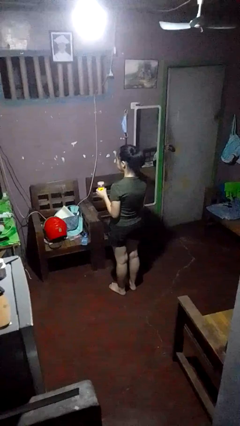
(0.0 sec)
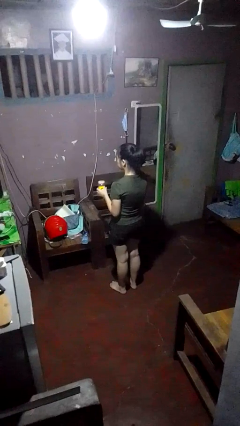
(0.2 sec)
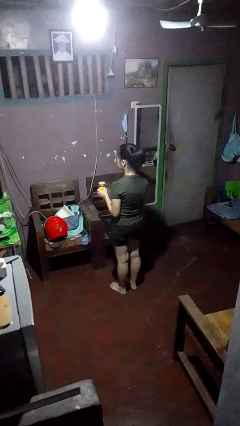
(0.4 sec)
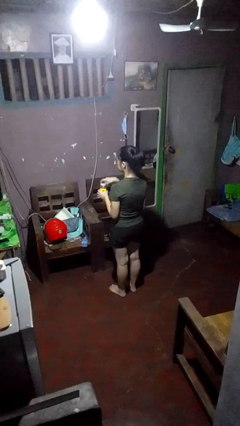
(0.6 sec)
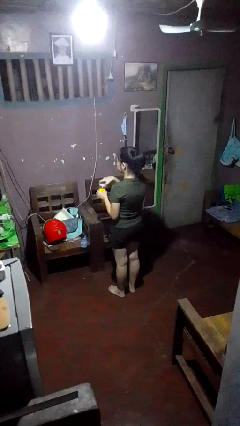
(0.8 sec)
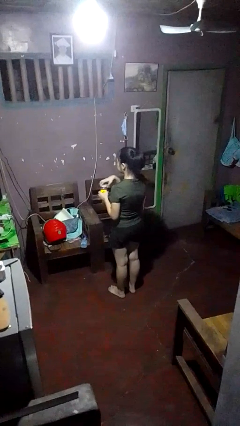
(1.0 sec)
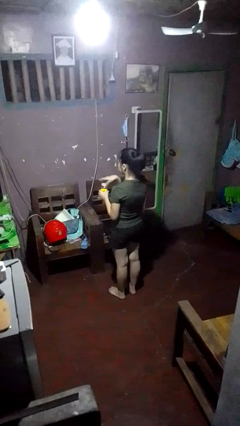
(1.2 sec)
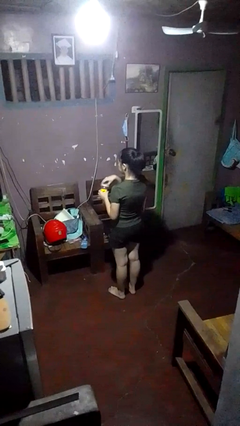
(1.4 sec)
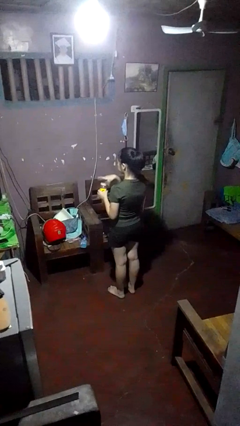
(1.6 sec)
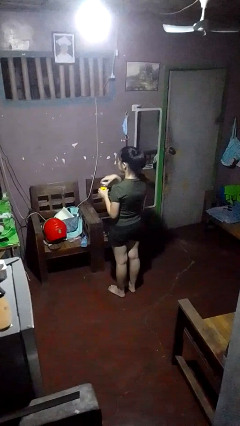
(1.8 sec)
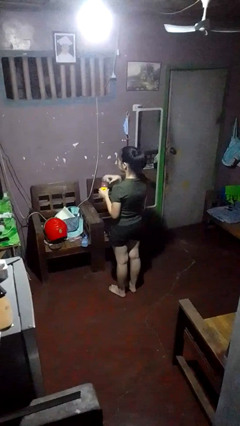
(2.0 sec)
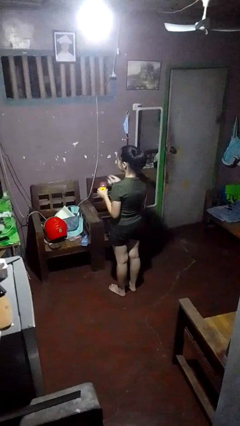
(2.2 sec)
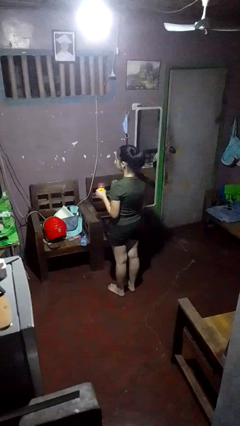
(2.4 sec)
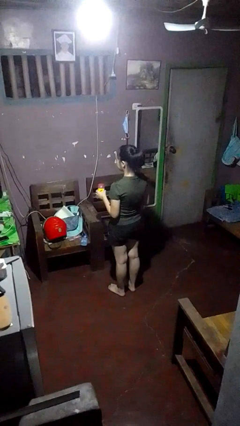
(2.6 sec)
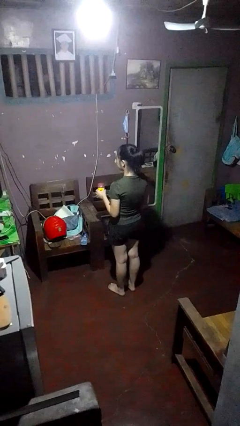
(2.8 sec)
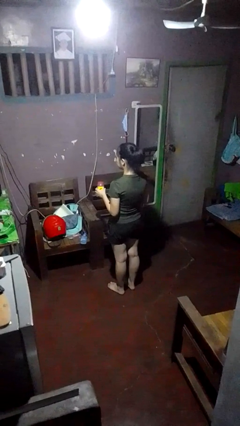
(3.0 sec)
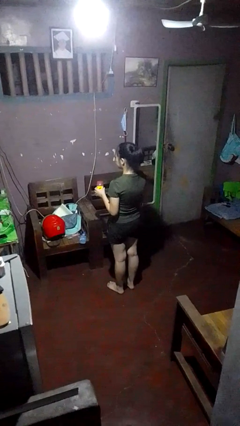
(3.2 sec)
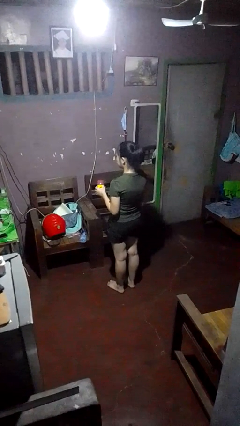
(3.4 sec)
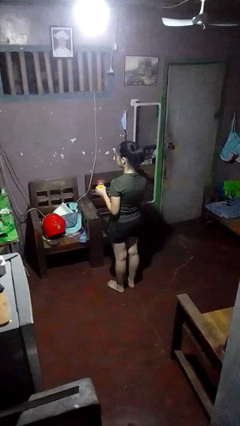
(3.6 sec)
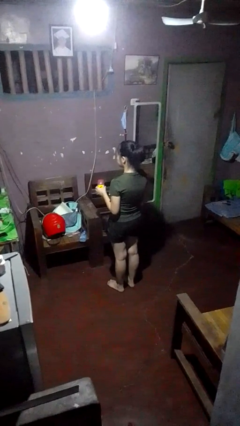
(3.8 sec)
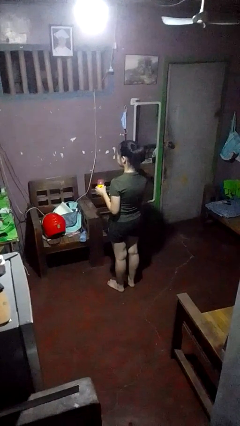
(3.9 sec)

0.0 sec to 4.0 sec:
person opens jar

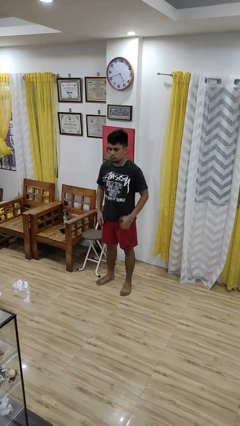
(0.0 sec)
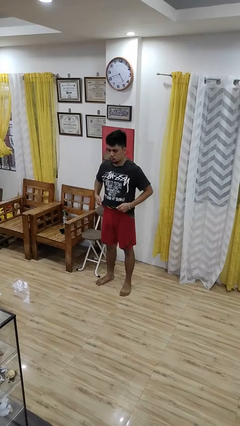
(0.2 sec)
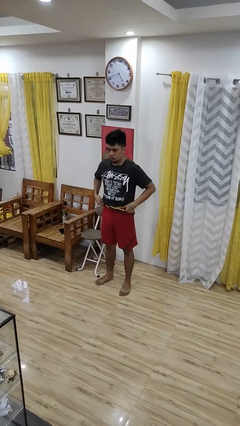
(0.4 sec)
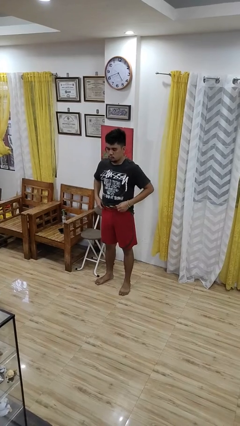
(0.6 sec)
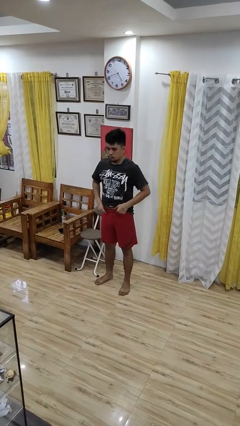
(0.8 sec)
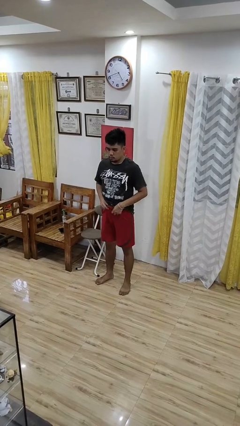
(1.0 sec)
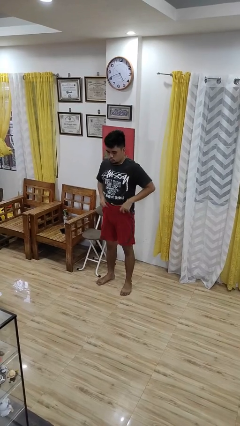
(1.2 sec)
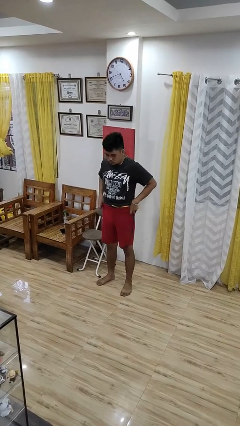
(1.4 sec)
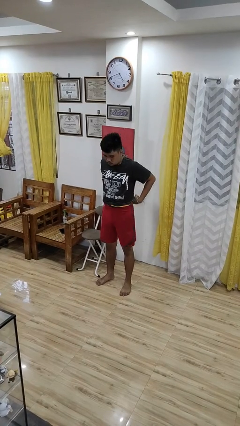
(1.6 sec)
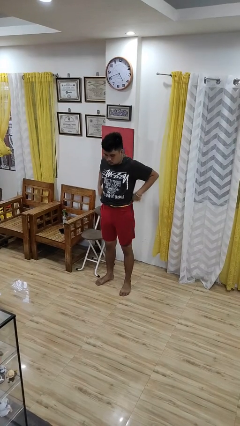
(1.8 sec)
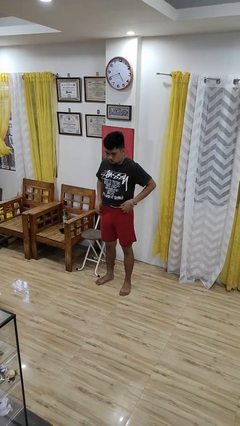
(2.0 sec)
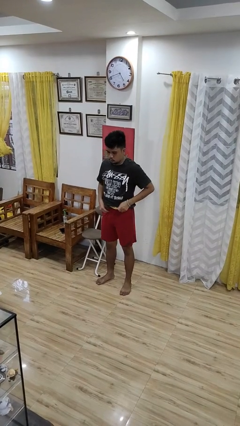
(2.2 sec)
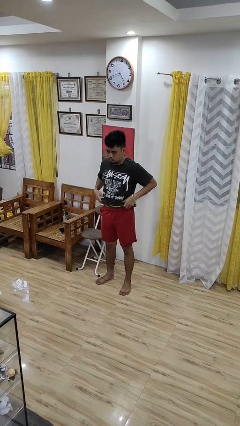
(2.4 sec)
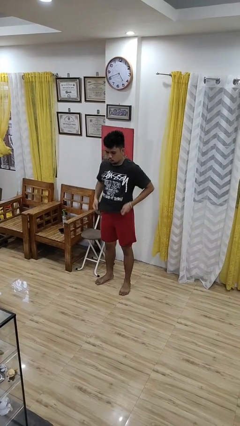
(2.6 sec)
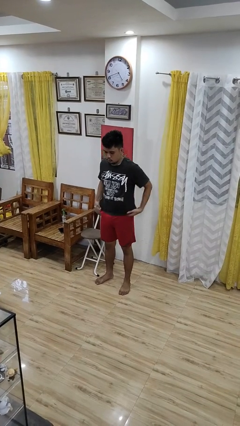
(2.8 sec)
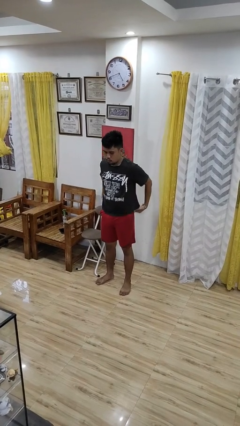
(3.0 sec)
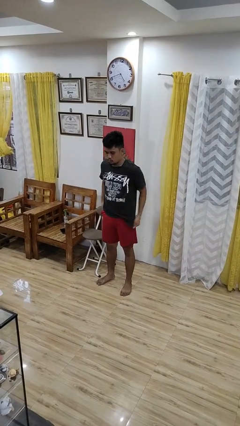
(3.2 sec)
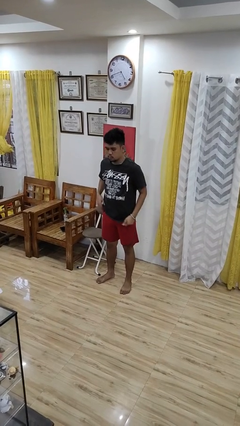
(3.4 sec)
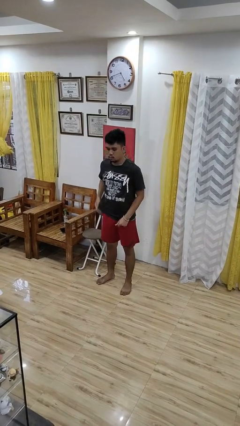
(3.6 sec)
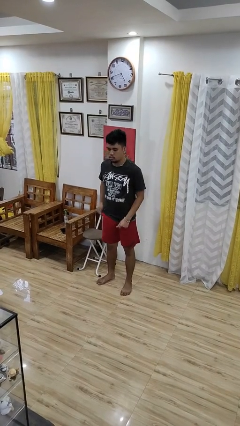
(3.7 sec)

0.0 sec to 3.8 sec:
person hikes up pants

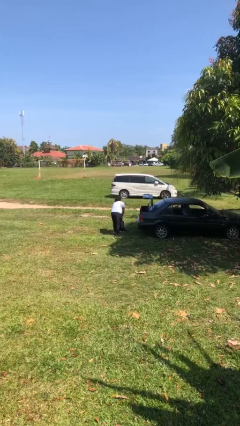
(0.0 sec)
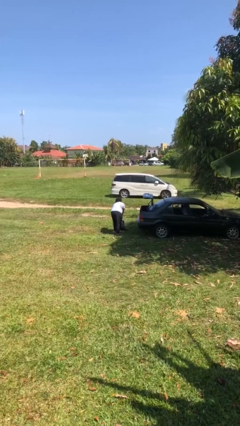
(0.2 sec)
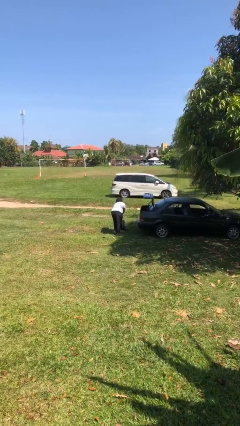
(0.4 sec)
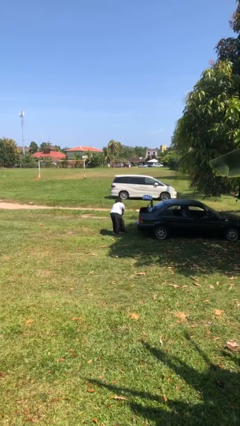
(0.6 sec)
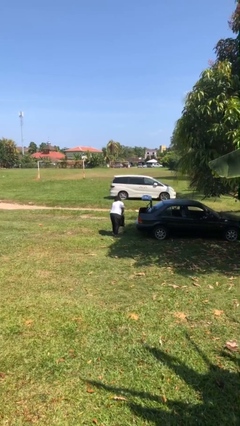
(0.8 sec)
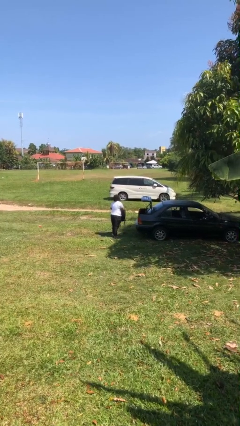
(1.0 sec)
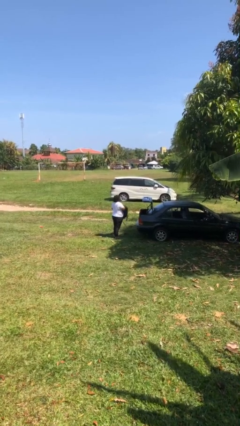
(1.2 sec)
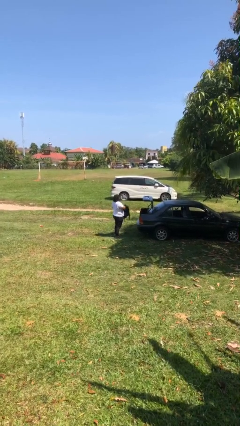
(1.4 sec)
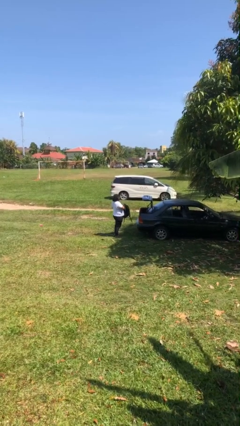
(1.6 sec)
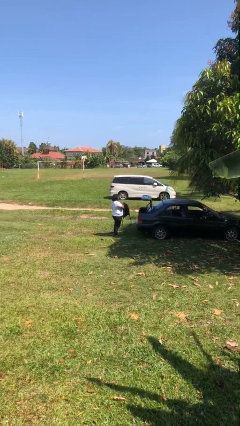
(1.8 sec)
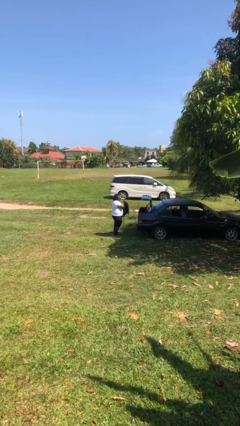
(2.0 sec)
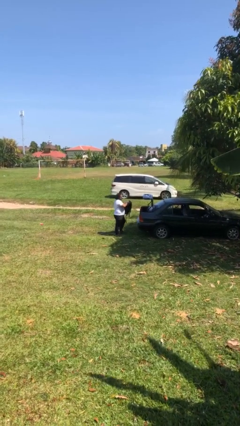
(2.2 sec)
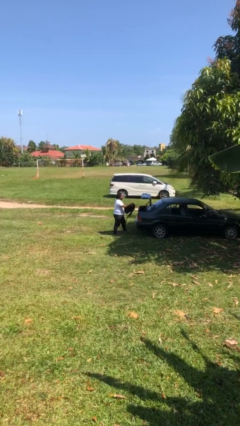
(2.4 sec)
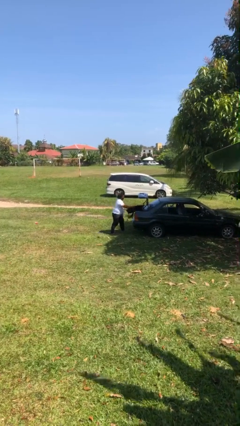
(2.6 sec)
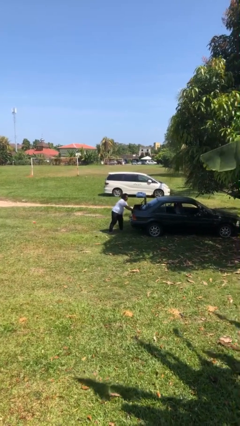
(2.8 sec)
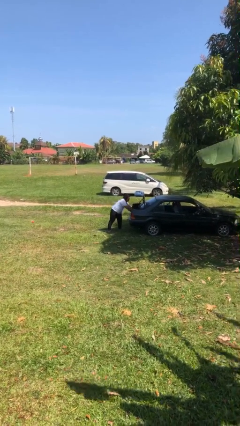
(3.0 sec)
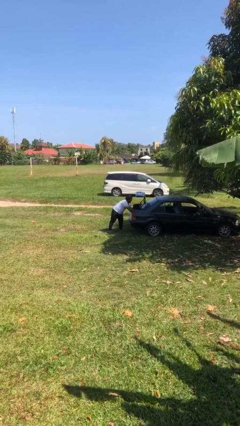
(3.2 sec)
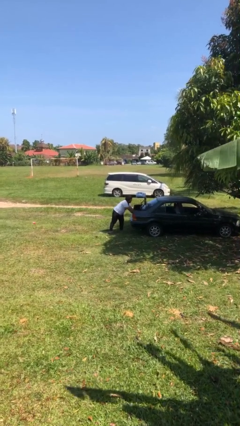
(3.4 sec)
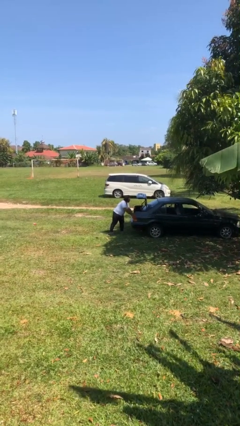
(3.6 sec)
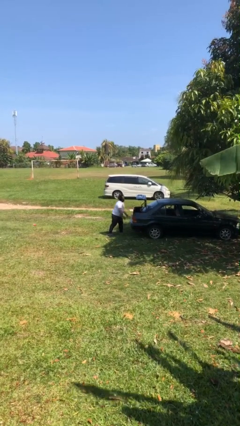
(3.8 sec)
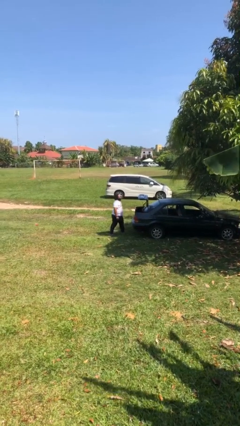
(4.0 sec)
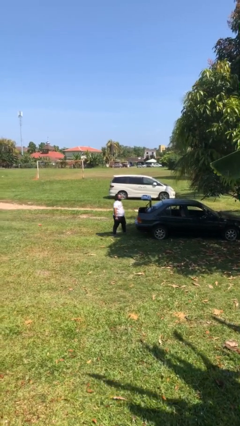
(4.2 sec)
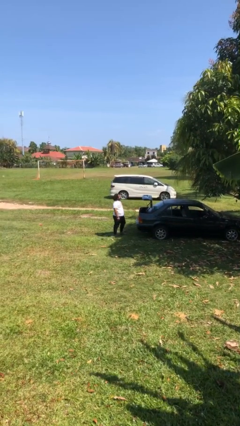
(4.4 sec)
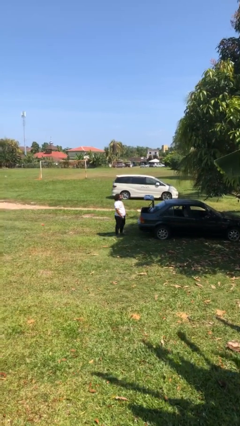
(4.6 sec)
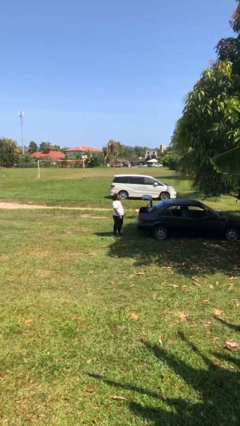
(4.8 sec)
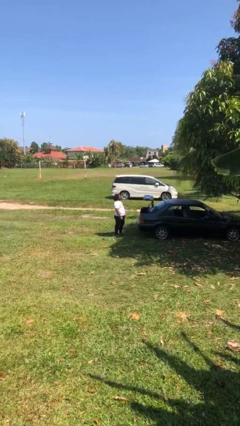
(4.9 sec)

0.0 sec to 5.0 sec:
person loads car

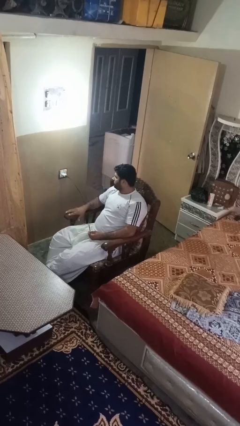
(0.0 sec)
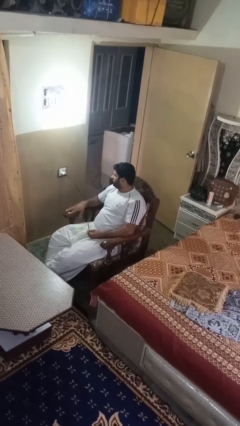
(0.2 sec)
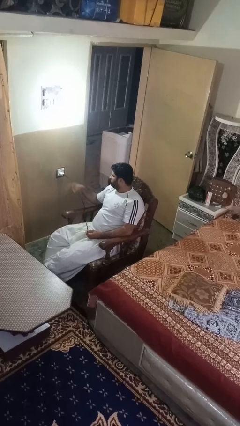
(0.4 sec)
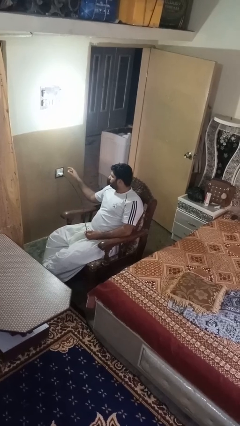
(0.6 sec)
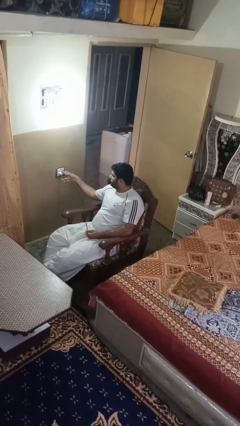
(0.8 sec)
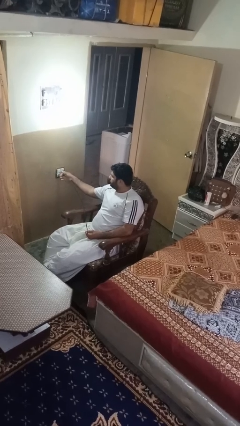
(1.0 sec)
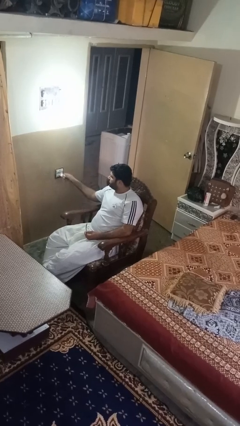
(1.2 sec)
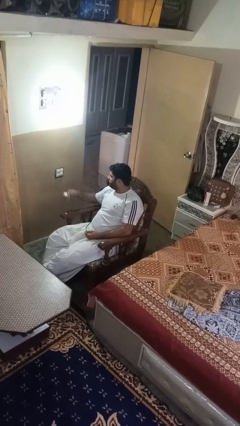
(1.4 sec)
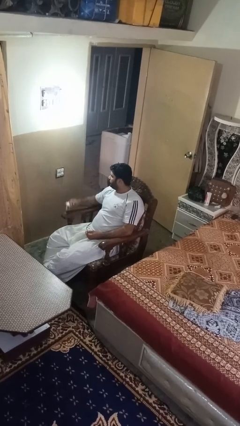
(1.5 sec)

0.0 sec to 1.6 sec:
person unplugs from electrical socket

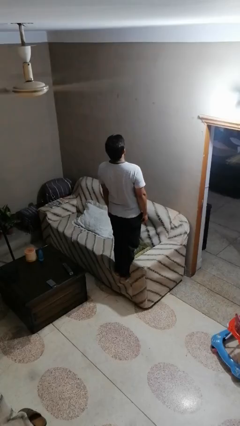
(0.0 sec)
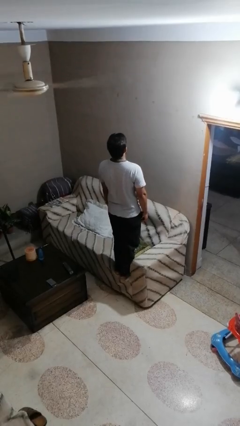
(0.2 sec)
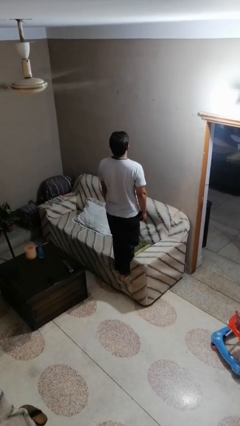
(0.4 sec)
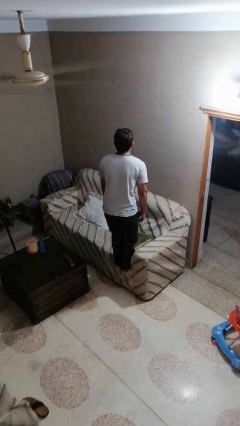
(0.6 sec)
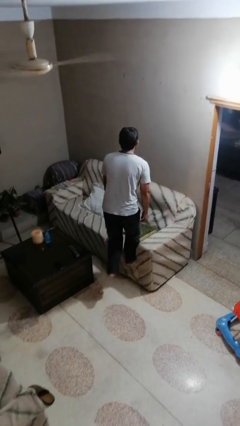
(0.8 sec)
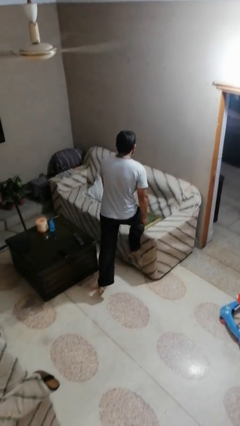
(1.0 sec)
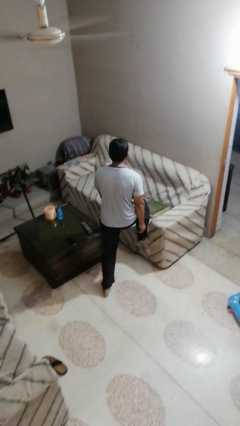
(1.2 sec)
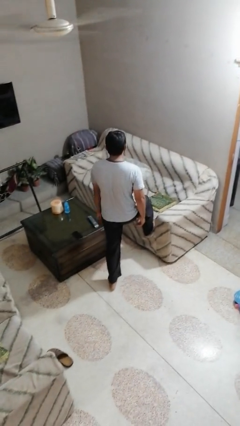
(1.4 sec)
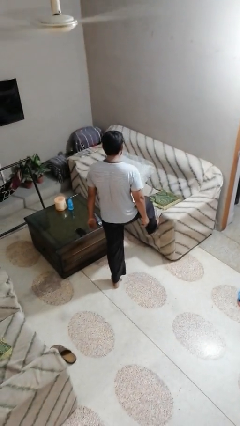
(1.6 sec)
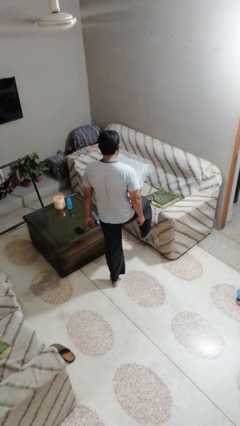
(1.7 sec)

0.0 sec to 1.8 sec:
person climbs off couch

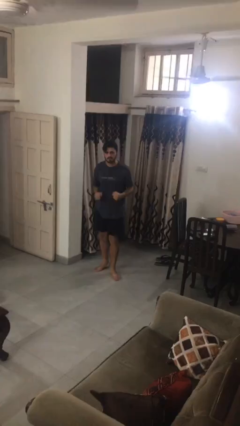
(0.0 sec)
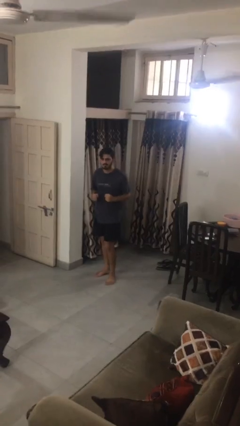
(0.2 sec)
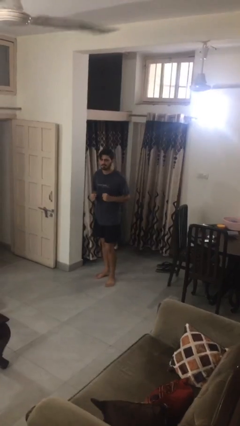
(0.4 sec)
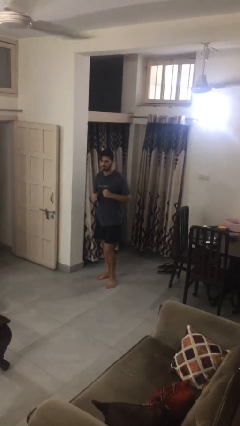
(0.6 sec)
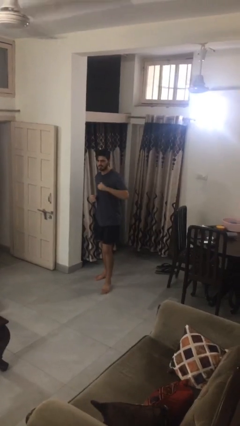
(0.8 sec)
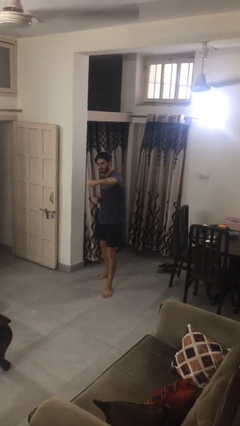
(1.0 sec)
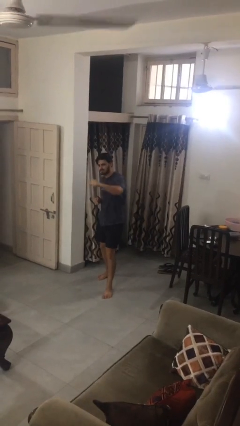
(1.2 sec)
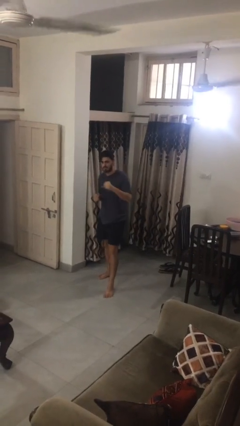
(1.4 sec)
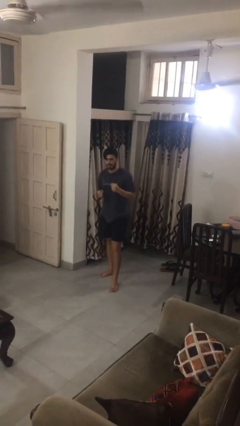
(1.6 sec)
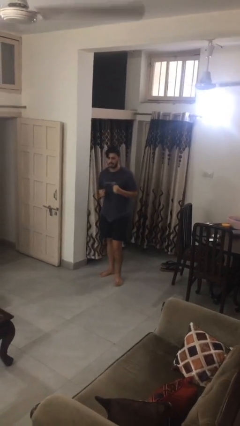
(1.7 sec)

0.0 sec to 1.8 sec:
person karate chop
